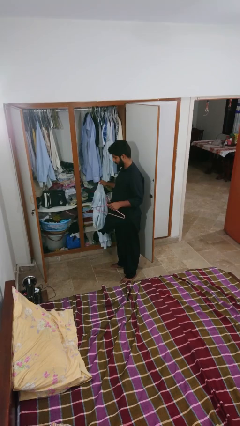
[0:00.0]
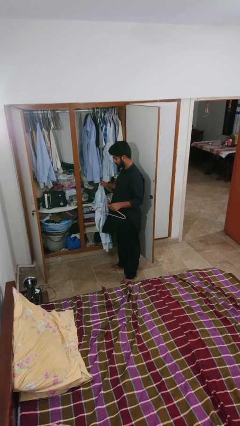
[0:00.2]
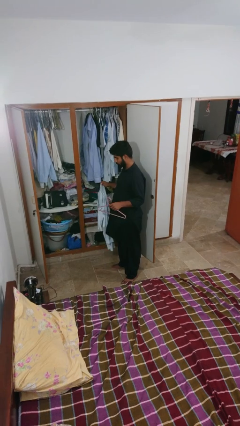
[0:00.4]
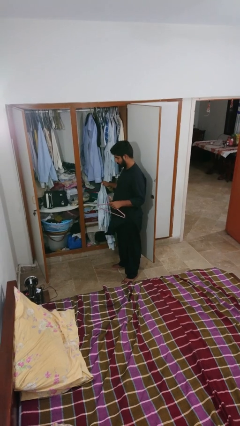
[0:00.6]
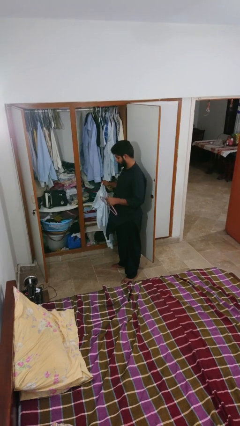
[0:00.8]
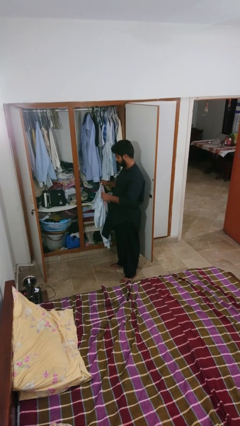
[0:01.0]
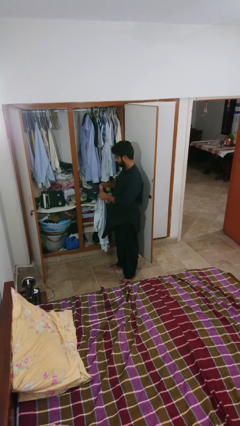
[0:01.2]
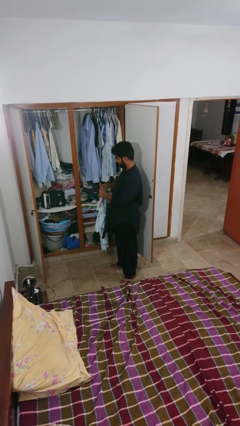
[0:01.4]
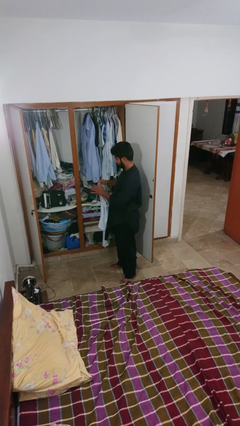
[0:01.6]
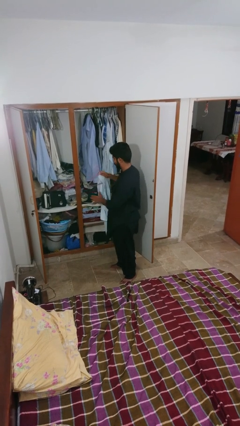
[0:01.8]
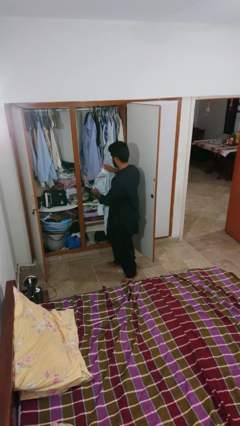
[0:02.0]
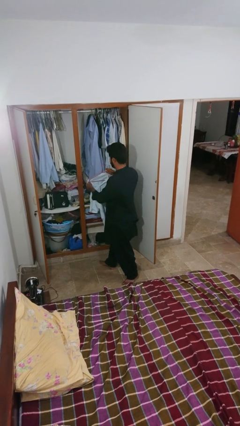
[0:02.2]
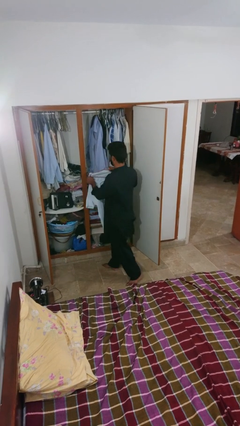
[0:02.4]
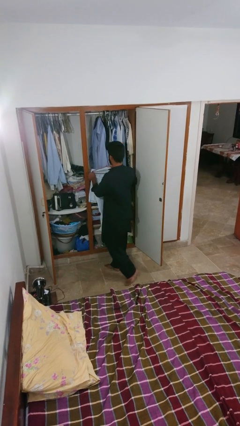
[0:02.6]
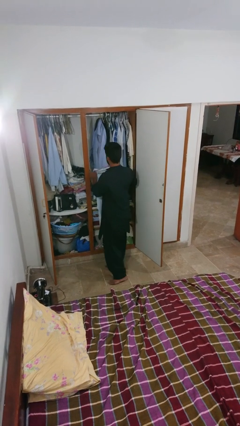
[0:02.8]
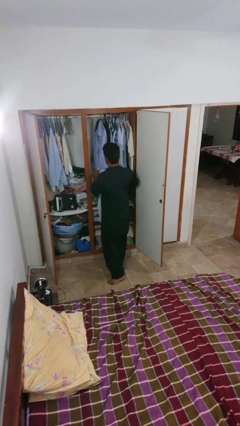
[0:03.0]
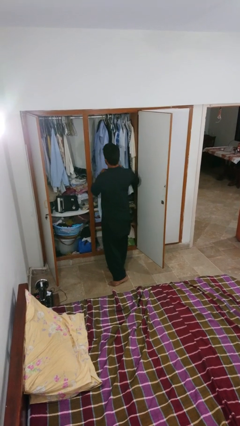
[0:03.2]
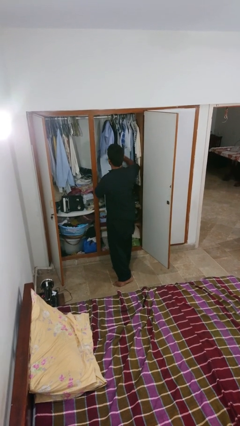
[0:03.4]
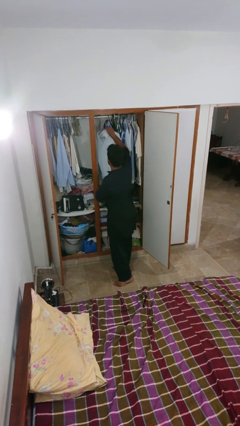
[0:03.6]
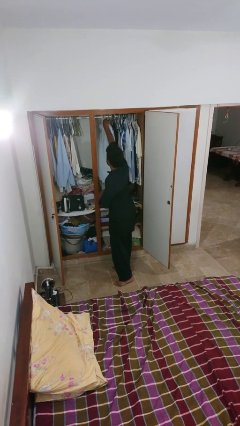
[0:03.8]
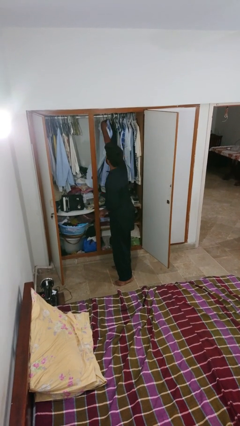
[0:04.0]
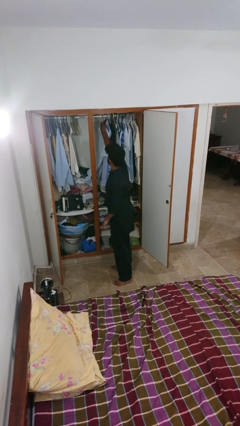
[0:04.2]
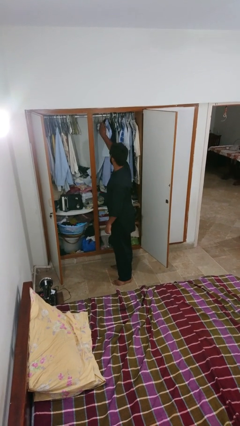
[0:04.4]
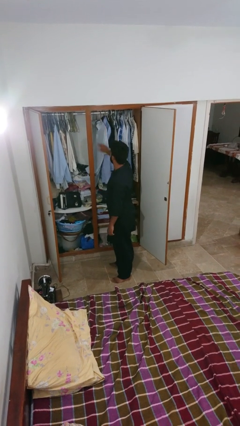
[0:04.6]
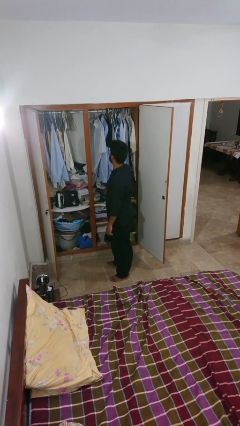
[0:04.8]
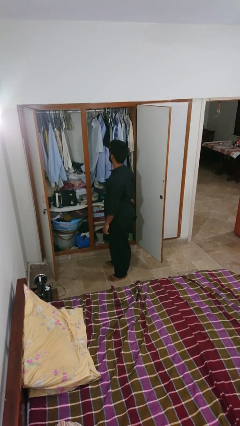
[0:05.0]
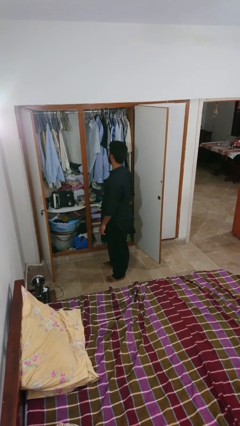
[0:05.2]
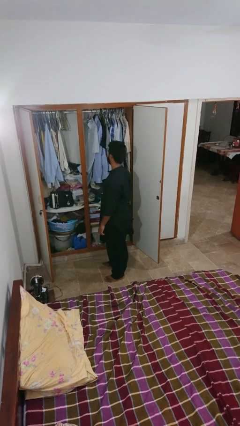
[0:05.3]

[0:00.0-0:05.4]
person puts clothes into closet

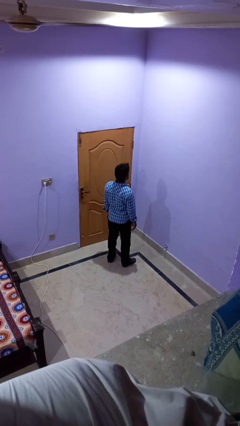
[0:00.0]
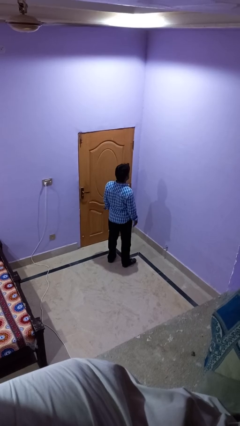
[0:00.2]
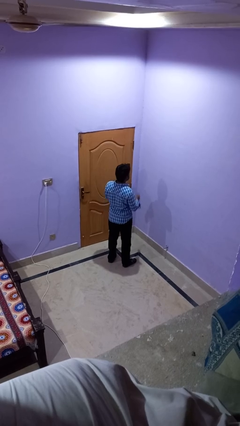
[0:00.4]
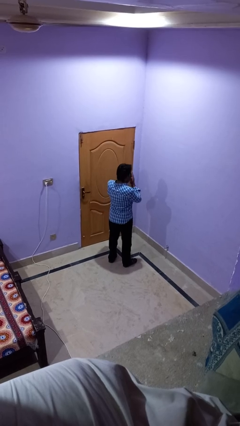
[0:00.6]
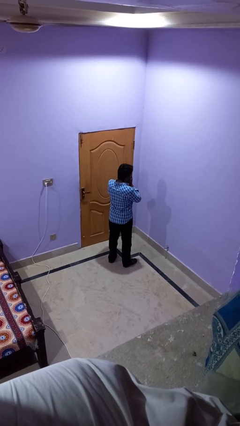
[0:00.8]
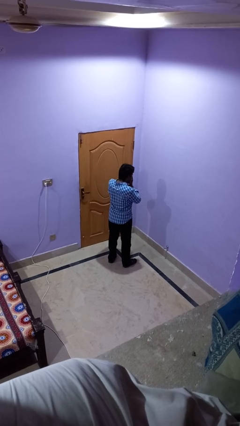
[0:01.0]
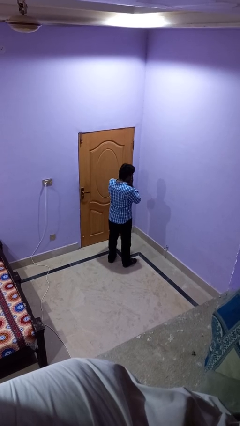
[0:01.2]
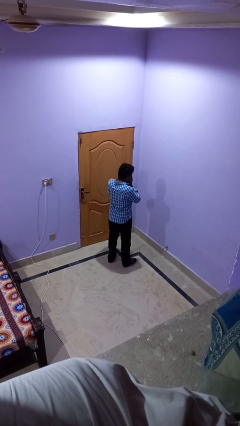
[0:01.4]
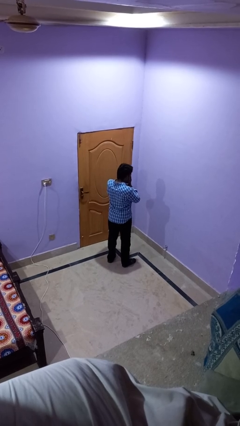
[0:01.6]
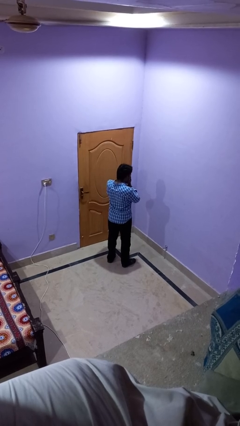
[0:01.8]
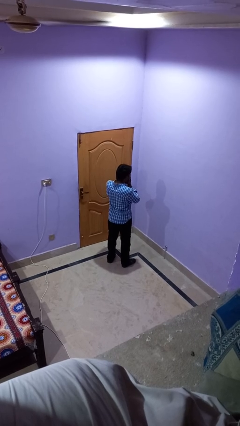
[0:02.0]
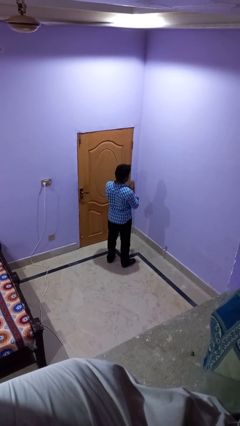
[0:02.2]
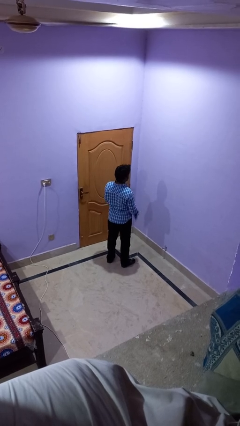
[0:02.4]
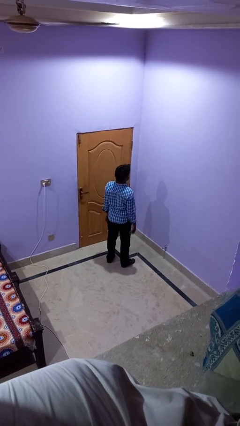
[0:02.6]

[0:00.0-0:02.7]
person sneezes into hand

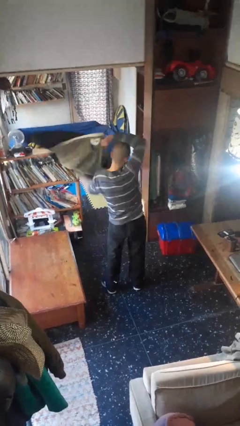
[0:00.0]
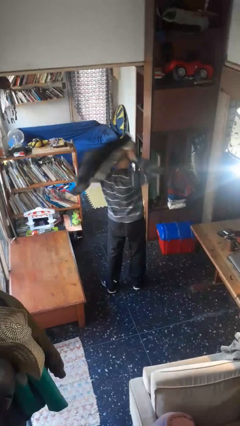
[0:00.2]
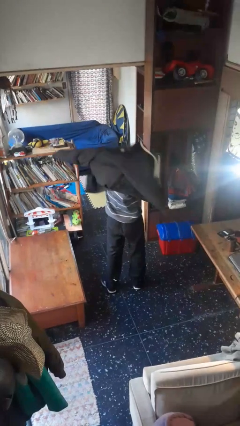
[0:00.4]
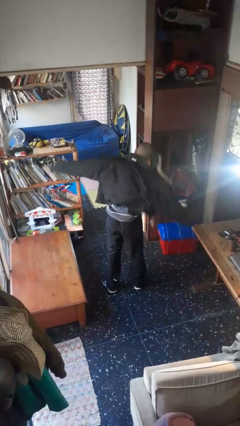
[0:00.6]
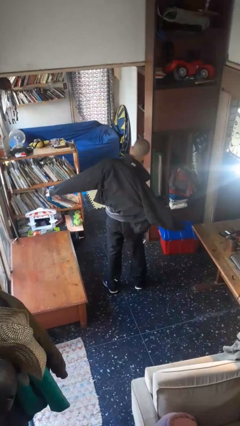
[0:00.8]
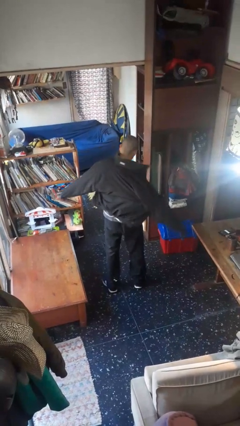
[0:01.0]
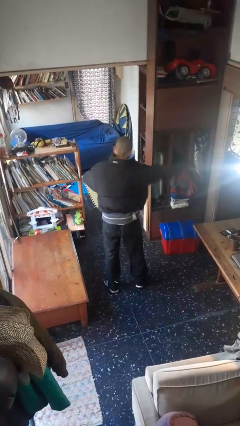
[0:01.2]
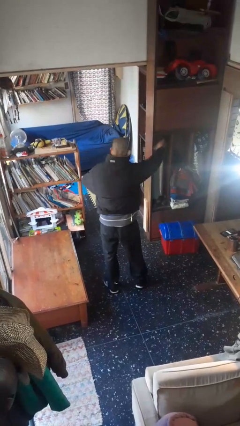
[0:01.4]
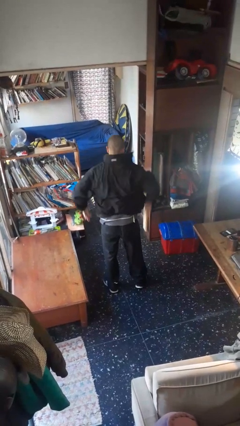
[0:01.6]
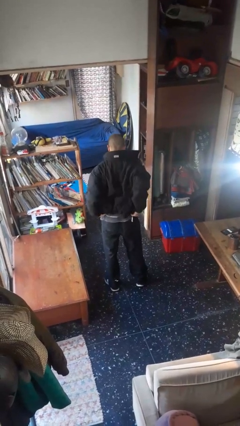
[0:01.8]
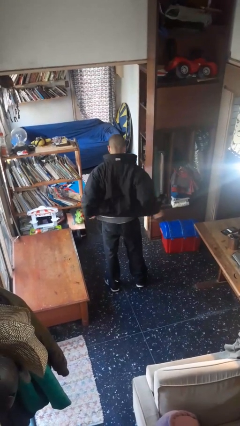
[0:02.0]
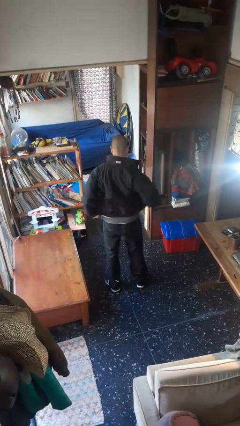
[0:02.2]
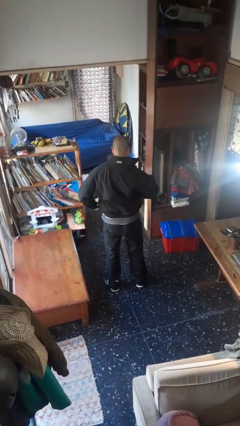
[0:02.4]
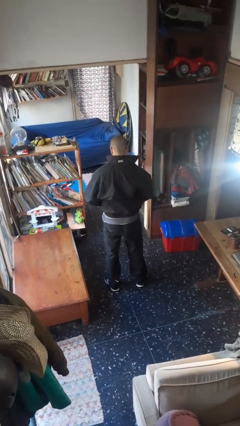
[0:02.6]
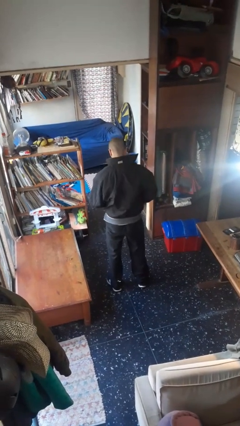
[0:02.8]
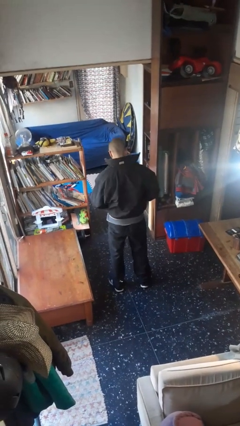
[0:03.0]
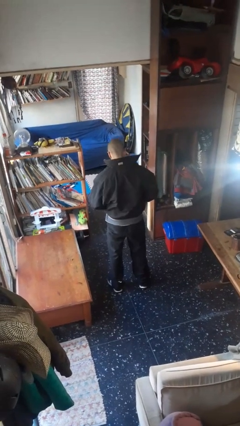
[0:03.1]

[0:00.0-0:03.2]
person puts on jacket

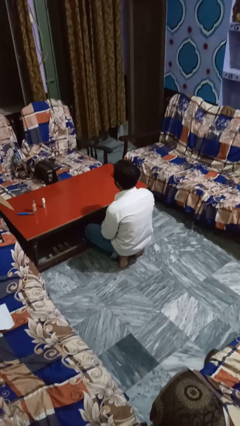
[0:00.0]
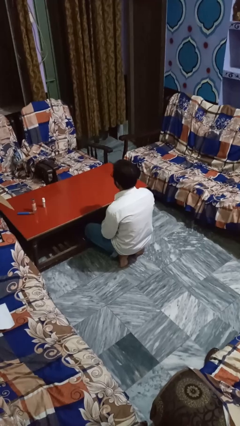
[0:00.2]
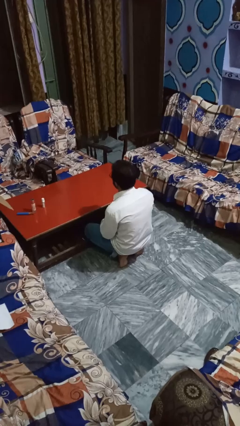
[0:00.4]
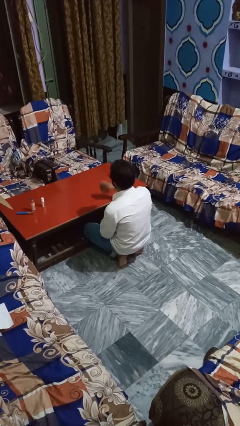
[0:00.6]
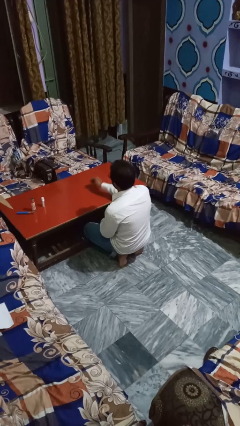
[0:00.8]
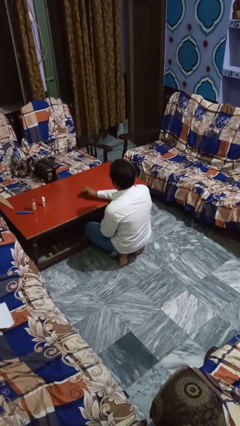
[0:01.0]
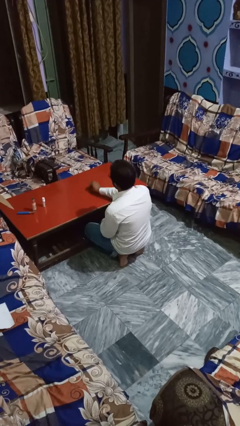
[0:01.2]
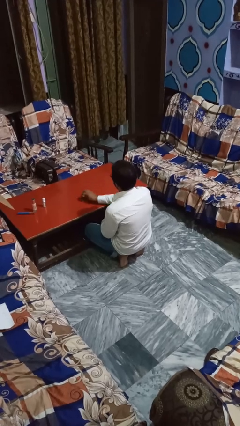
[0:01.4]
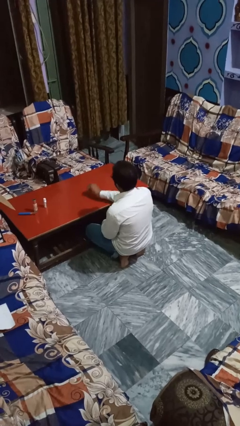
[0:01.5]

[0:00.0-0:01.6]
person cleans table with rag

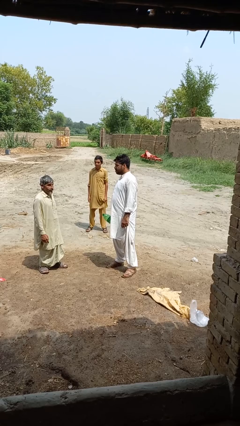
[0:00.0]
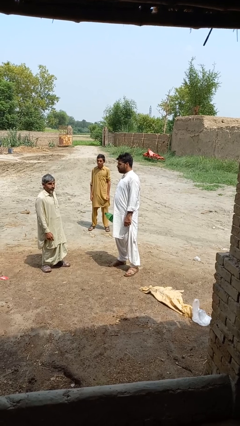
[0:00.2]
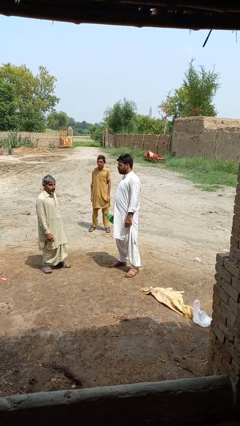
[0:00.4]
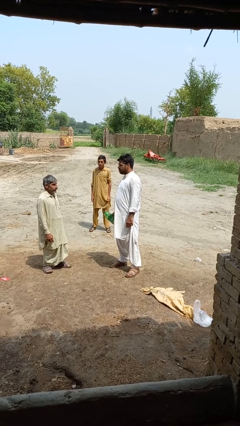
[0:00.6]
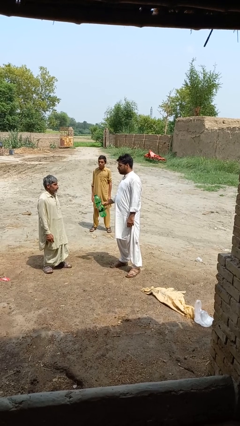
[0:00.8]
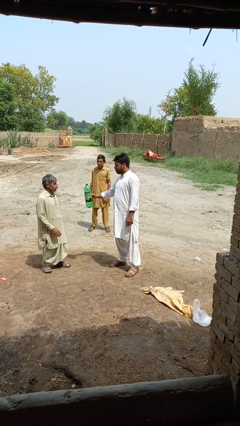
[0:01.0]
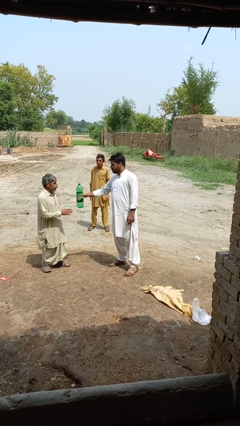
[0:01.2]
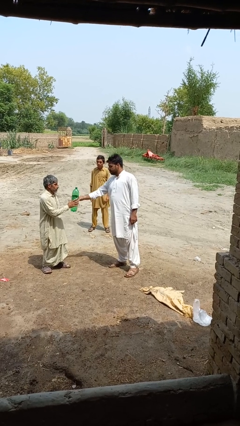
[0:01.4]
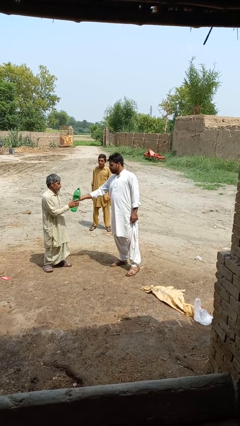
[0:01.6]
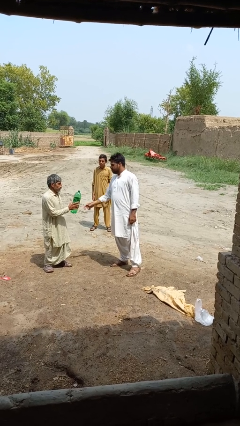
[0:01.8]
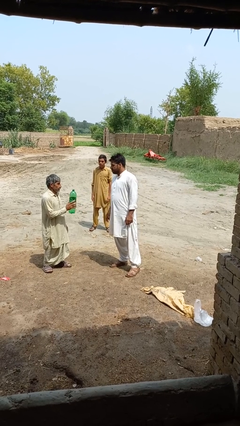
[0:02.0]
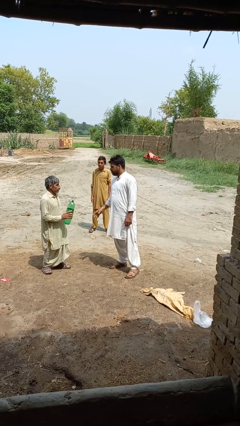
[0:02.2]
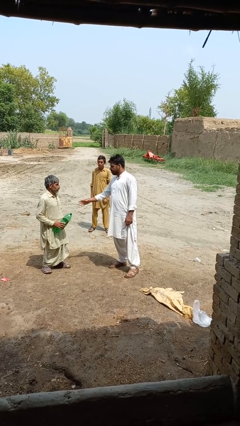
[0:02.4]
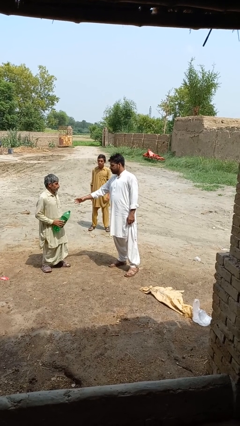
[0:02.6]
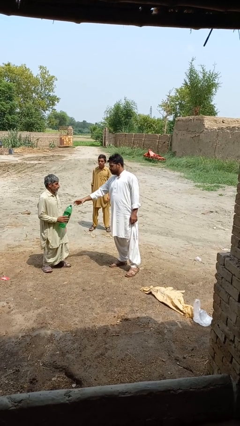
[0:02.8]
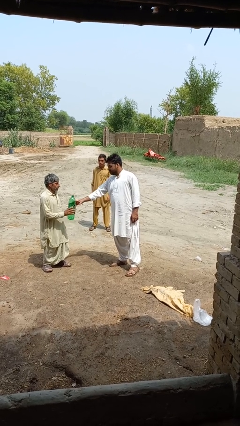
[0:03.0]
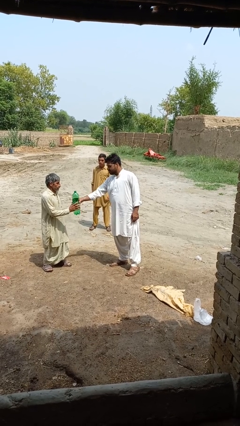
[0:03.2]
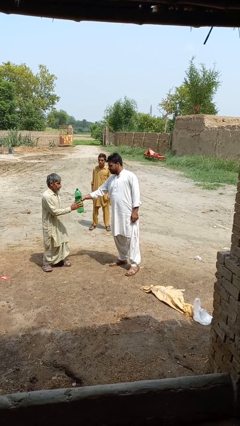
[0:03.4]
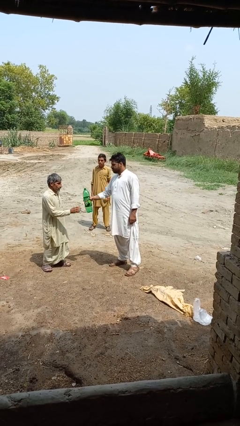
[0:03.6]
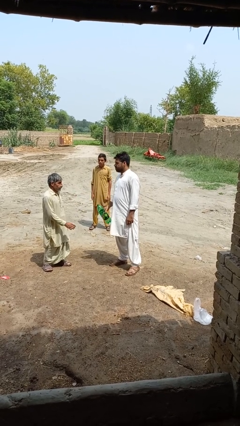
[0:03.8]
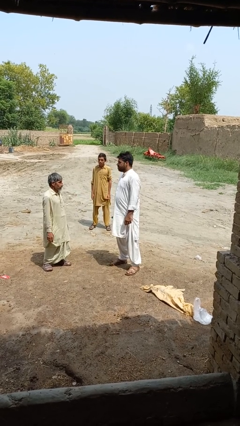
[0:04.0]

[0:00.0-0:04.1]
person transfers object to person

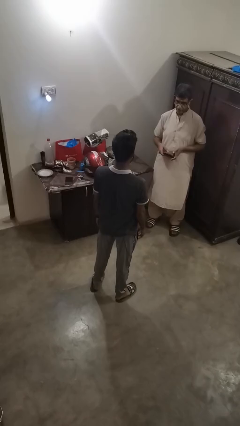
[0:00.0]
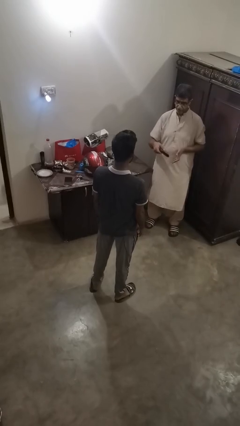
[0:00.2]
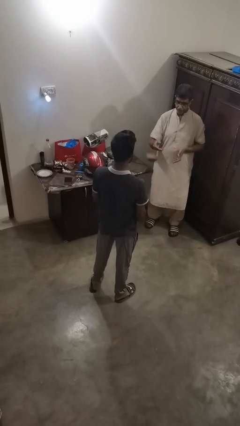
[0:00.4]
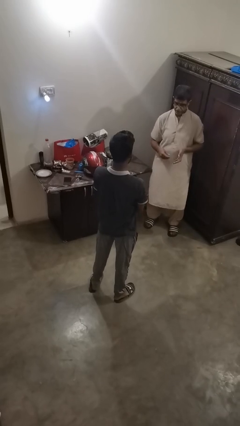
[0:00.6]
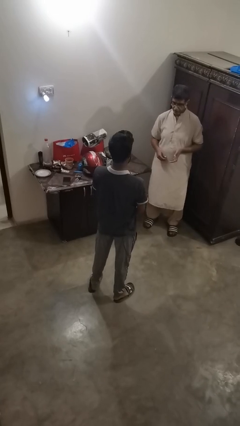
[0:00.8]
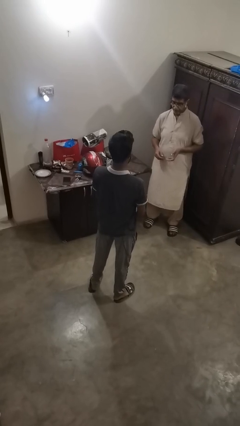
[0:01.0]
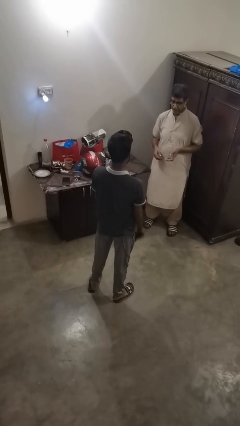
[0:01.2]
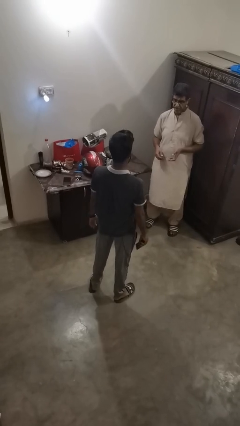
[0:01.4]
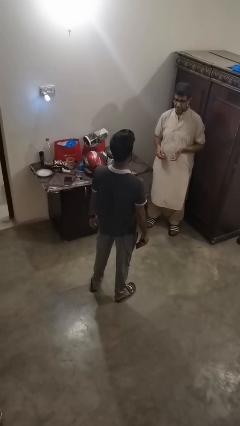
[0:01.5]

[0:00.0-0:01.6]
person catches object from person
